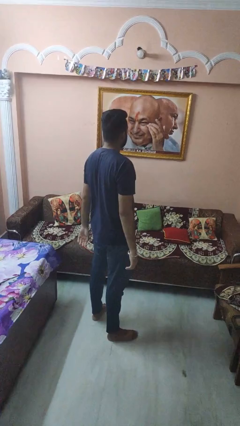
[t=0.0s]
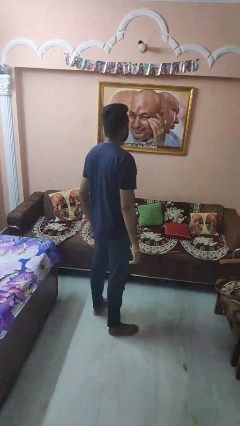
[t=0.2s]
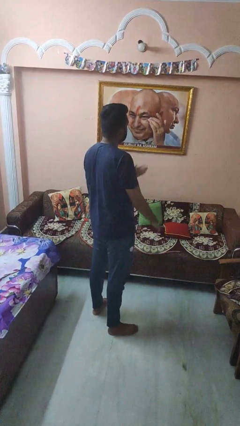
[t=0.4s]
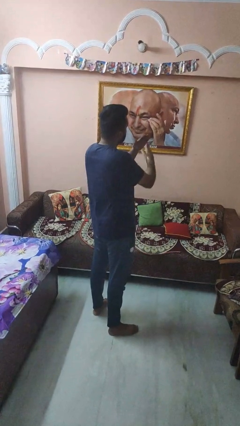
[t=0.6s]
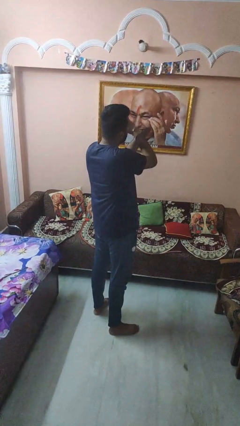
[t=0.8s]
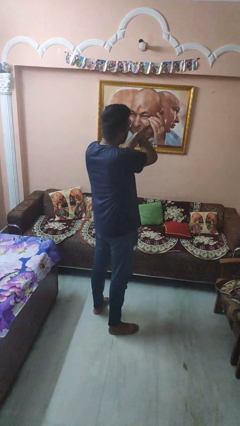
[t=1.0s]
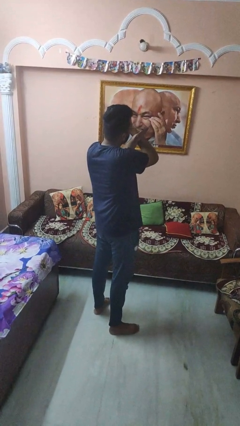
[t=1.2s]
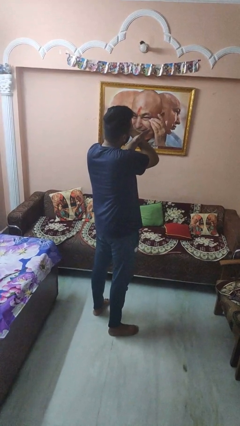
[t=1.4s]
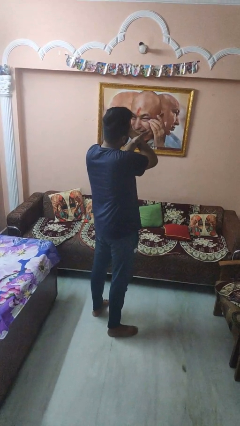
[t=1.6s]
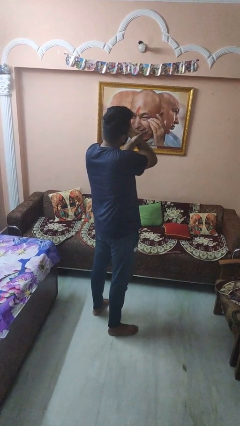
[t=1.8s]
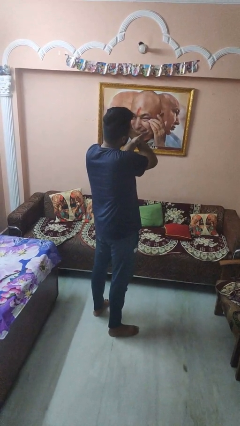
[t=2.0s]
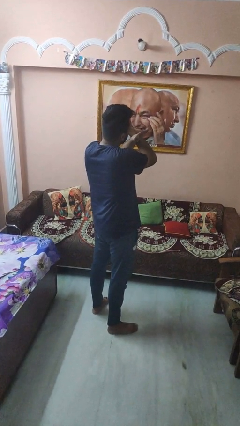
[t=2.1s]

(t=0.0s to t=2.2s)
person gestures arms x

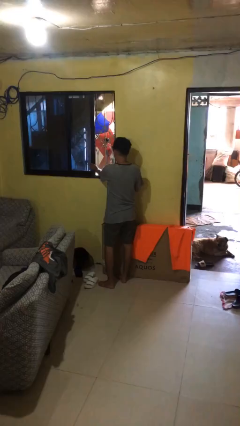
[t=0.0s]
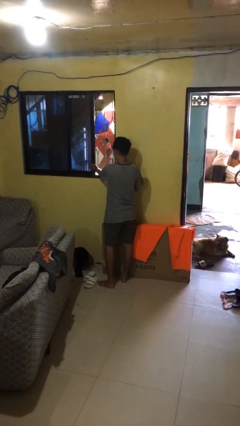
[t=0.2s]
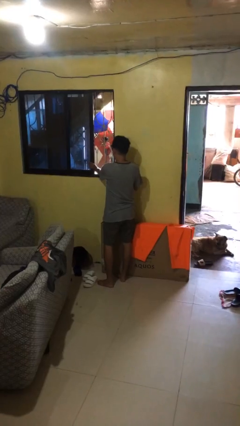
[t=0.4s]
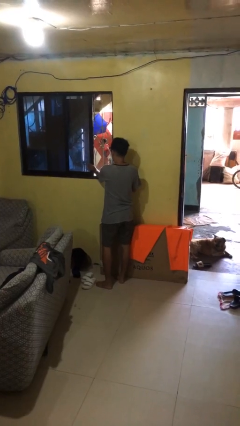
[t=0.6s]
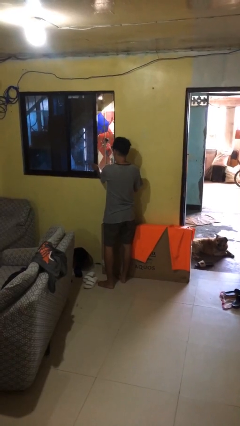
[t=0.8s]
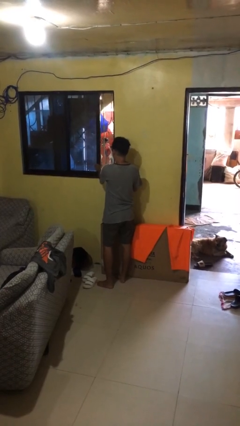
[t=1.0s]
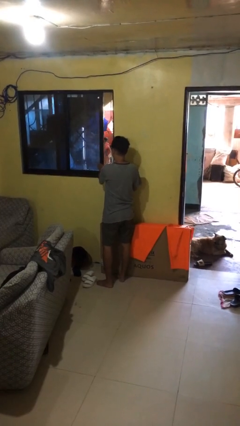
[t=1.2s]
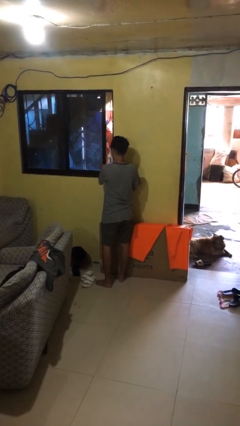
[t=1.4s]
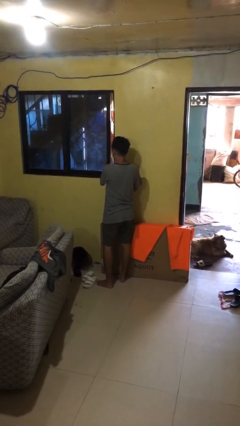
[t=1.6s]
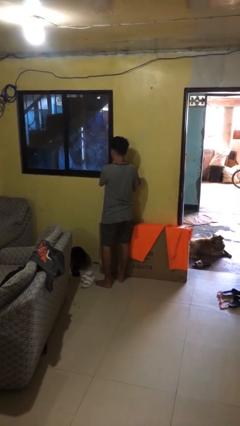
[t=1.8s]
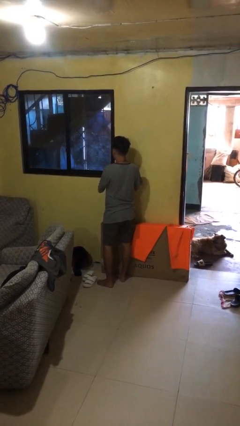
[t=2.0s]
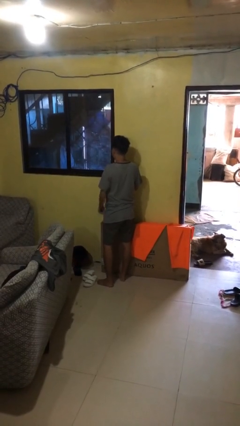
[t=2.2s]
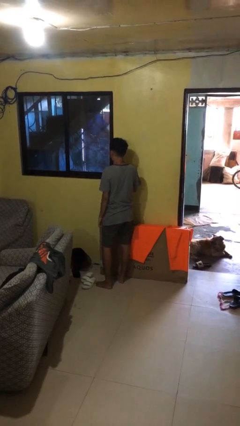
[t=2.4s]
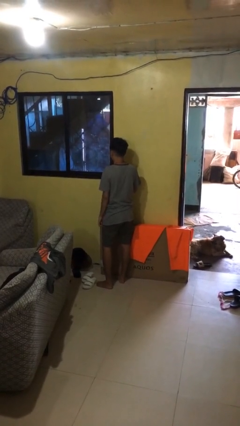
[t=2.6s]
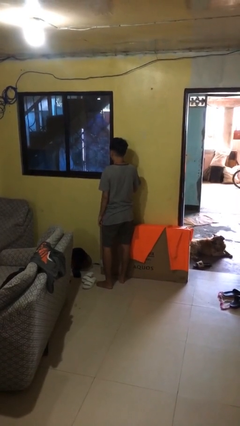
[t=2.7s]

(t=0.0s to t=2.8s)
person closes home window

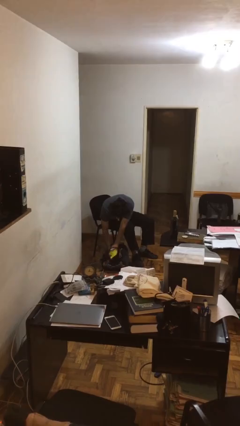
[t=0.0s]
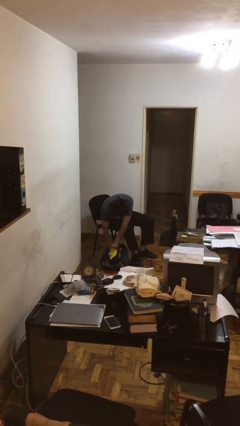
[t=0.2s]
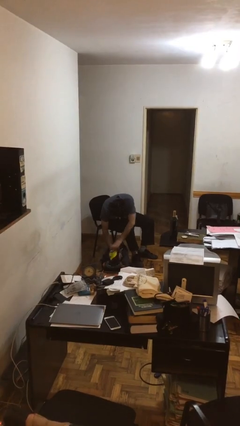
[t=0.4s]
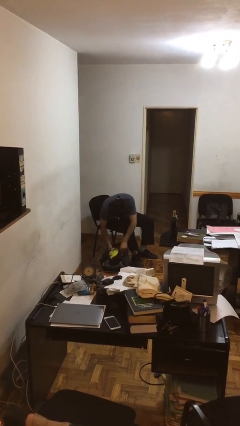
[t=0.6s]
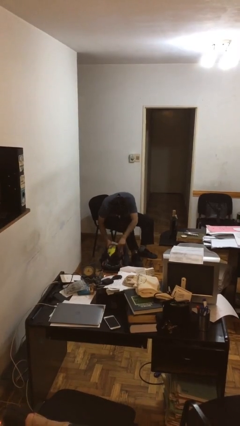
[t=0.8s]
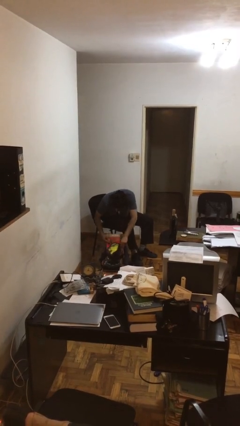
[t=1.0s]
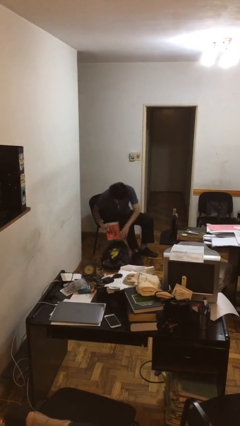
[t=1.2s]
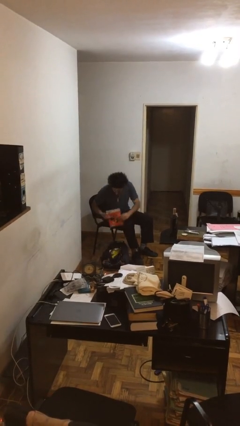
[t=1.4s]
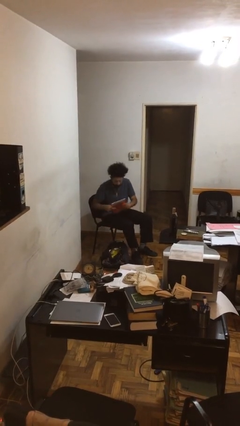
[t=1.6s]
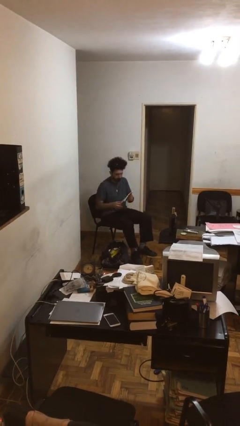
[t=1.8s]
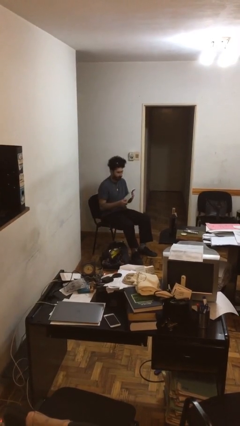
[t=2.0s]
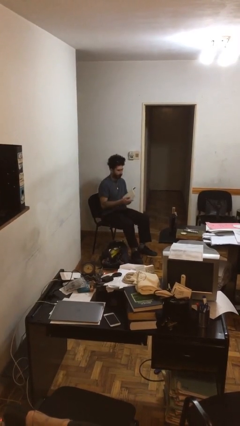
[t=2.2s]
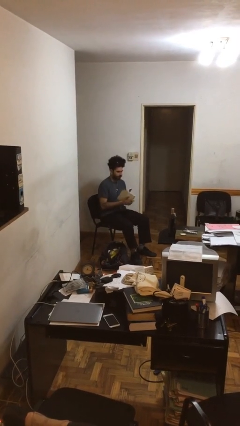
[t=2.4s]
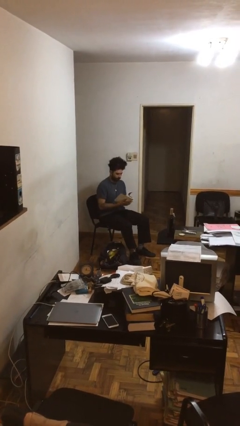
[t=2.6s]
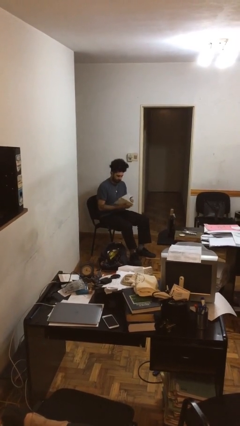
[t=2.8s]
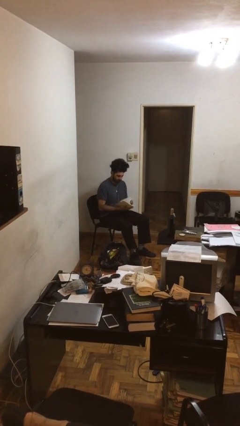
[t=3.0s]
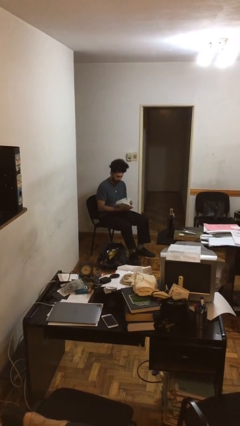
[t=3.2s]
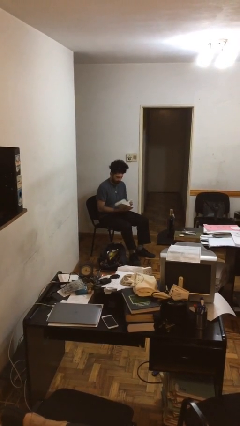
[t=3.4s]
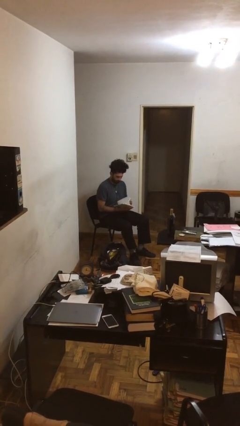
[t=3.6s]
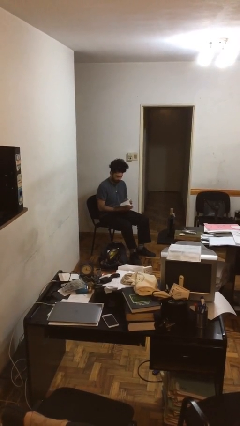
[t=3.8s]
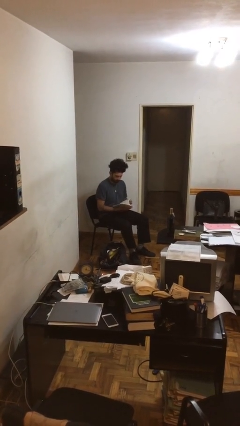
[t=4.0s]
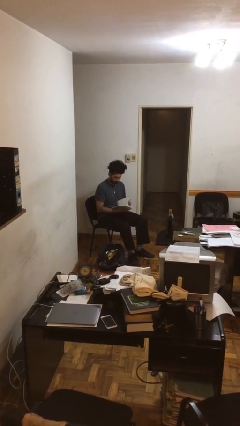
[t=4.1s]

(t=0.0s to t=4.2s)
person takes object from backpack

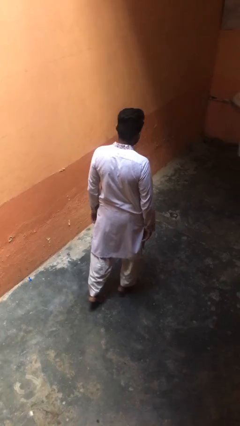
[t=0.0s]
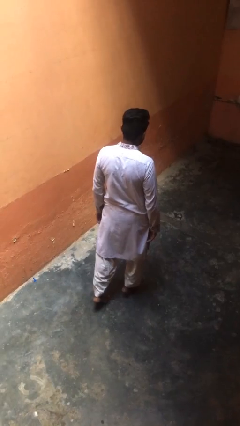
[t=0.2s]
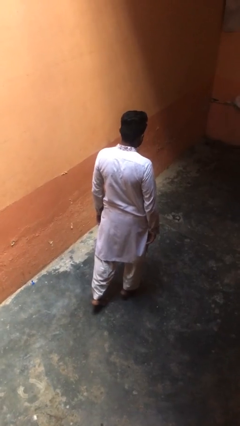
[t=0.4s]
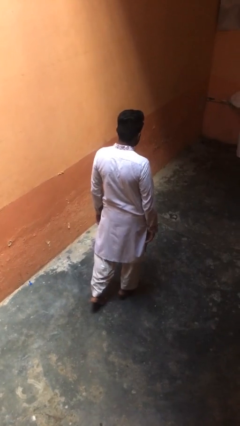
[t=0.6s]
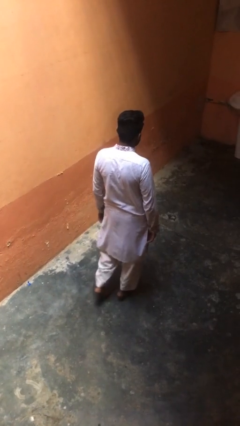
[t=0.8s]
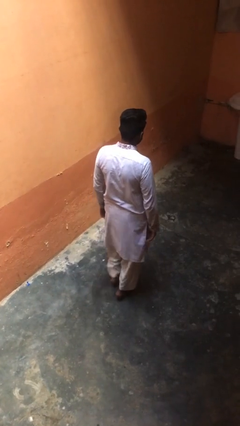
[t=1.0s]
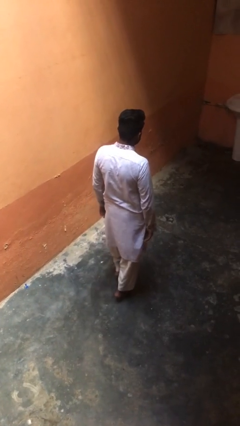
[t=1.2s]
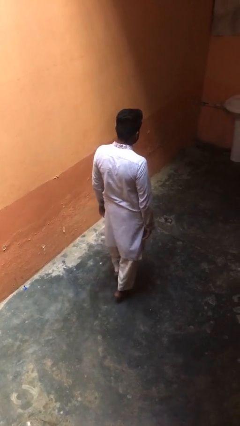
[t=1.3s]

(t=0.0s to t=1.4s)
person walks tiptoe

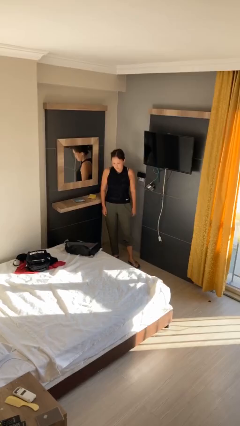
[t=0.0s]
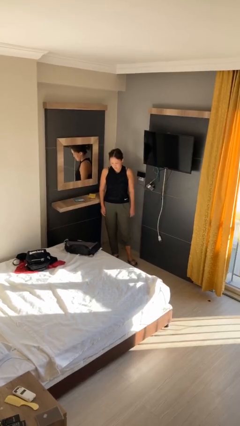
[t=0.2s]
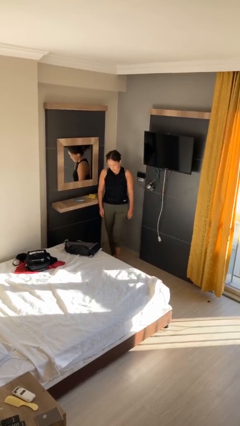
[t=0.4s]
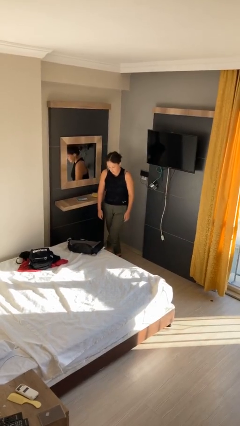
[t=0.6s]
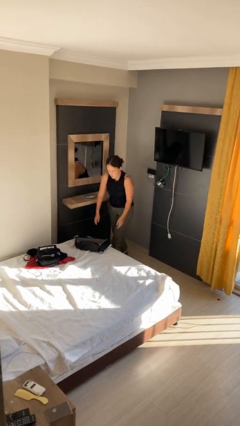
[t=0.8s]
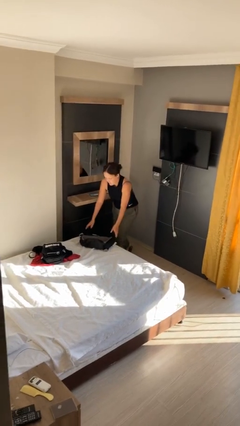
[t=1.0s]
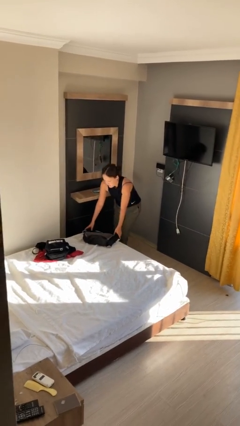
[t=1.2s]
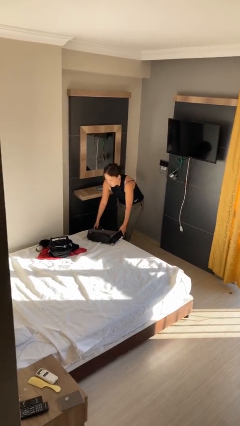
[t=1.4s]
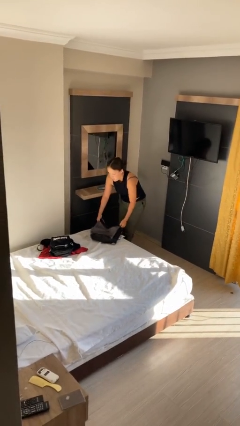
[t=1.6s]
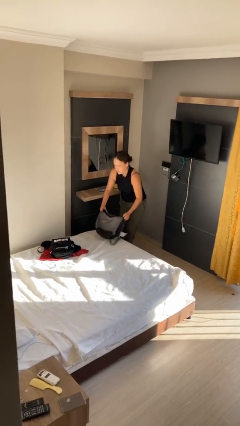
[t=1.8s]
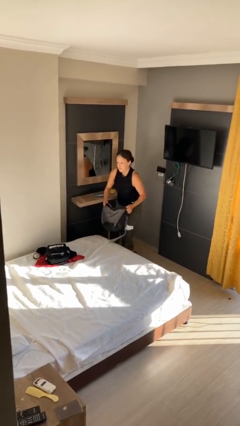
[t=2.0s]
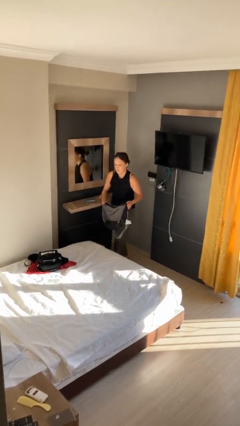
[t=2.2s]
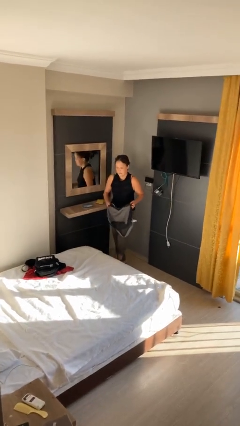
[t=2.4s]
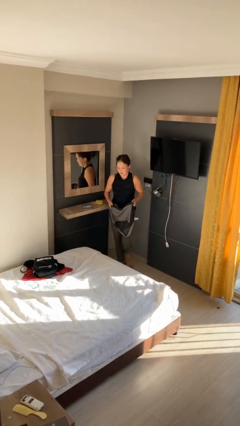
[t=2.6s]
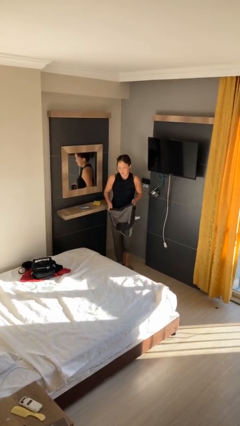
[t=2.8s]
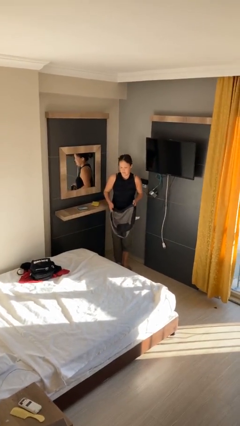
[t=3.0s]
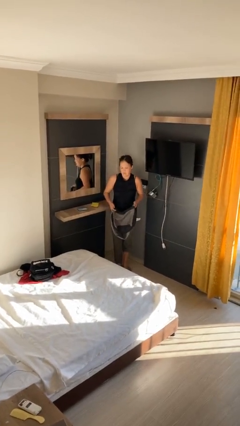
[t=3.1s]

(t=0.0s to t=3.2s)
person picks up object from bed

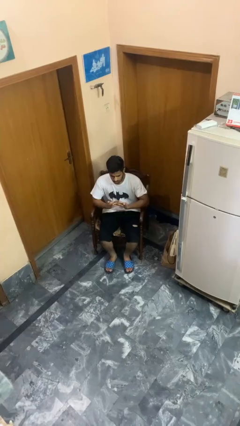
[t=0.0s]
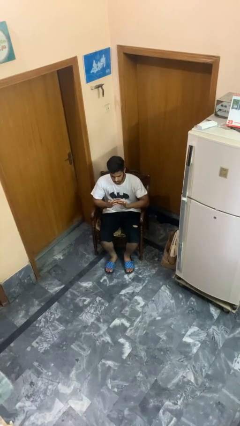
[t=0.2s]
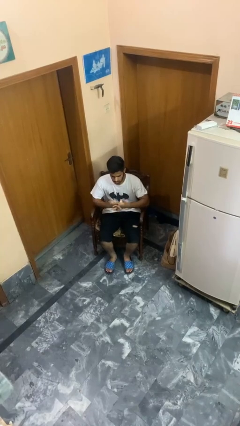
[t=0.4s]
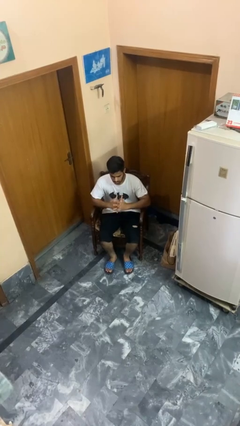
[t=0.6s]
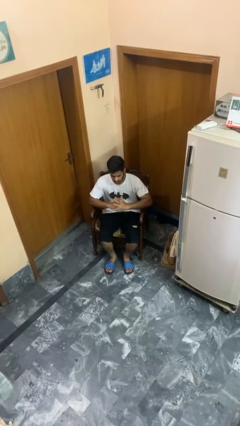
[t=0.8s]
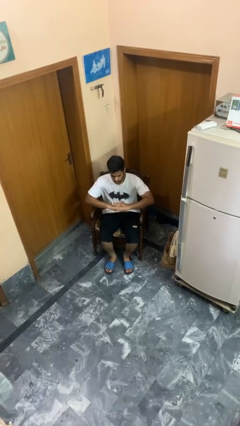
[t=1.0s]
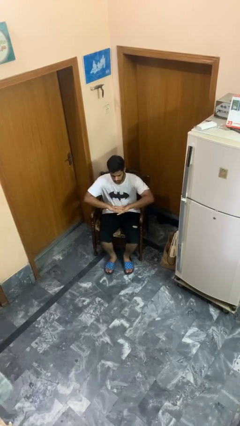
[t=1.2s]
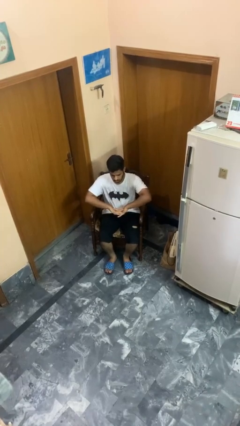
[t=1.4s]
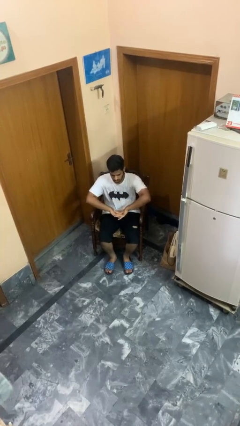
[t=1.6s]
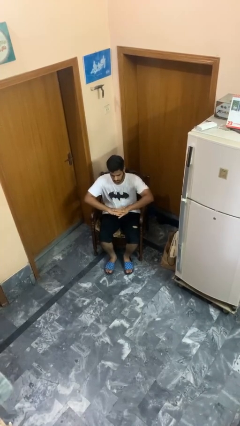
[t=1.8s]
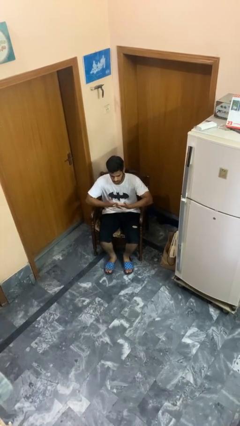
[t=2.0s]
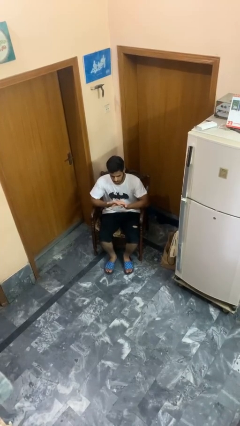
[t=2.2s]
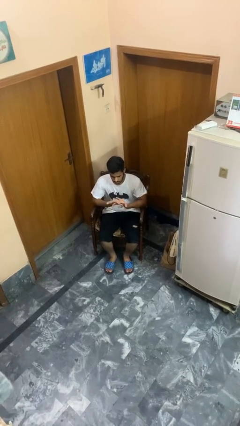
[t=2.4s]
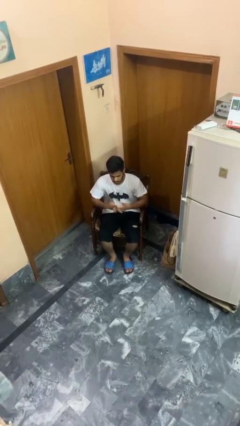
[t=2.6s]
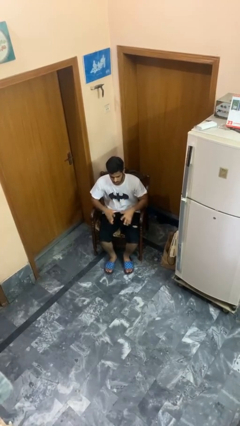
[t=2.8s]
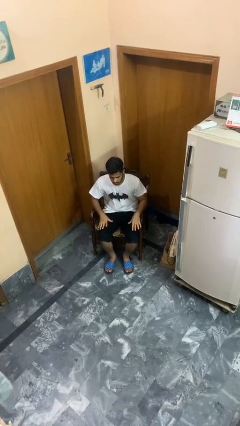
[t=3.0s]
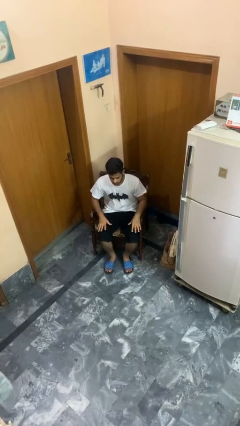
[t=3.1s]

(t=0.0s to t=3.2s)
person cracks knuckles
